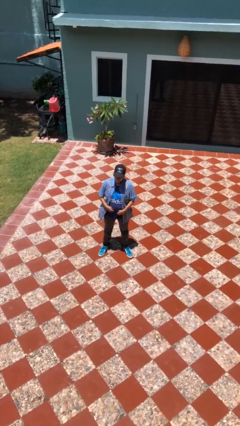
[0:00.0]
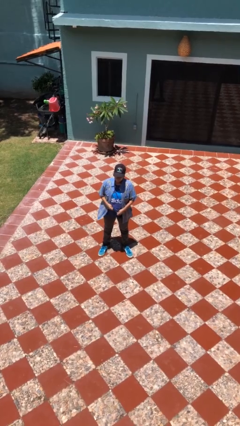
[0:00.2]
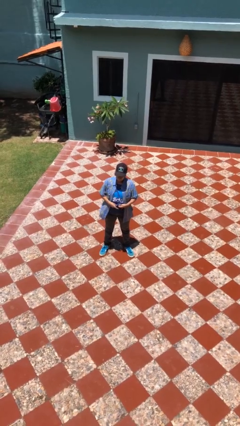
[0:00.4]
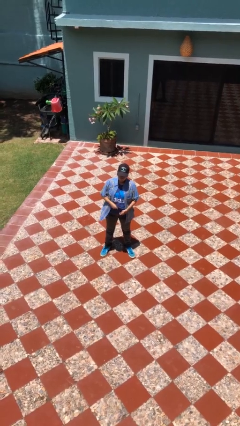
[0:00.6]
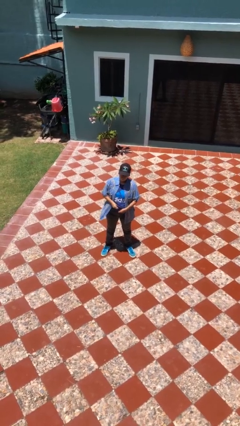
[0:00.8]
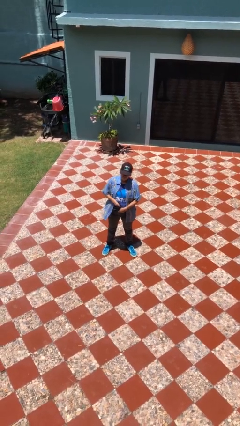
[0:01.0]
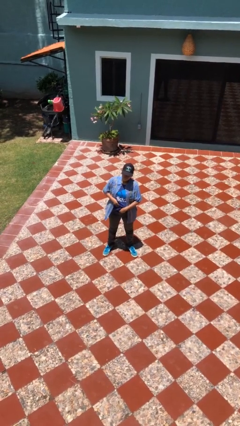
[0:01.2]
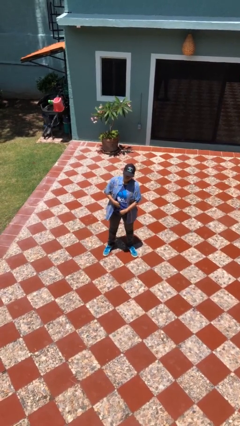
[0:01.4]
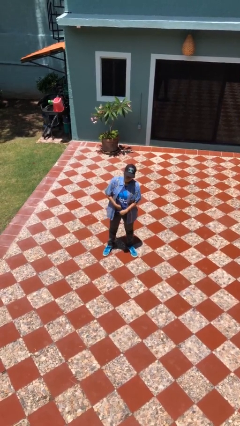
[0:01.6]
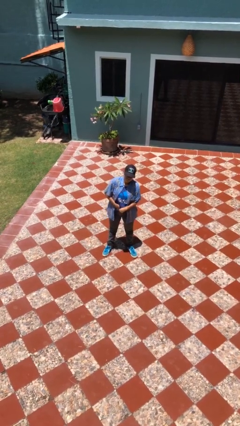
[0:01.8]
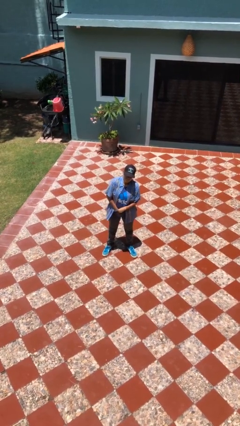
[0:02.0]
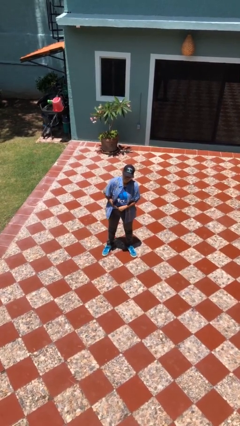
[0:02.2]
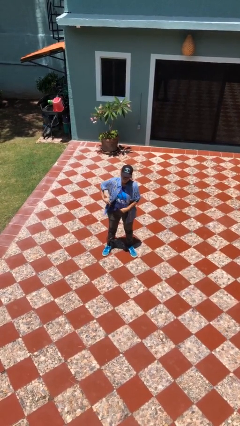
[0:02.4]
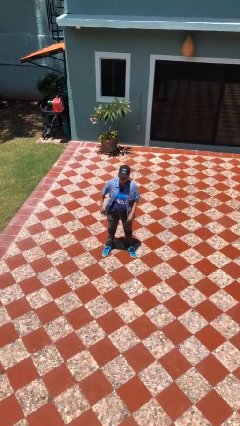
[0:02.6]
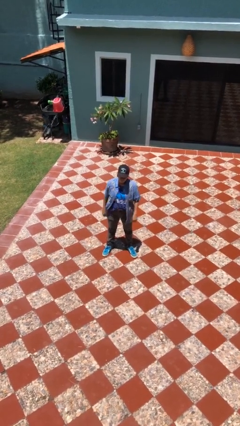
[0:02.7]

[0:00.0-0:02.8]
person tucks in shirt

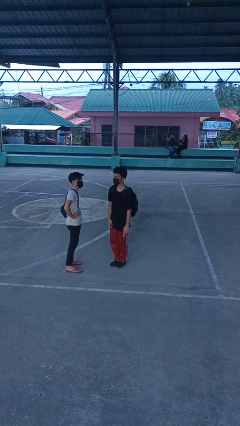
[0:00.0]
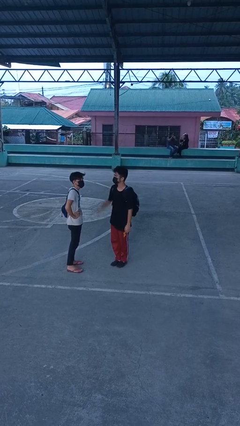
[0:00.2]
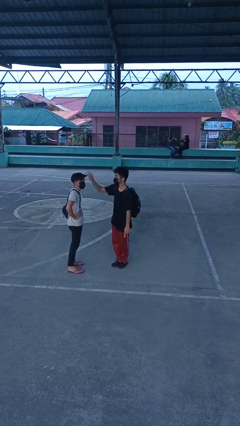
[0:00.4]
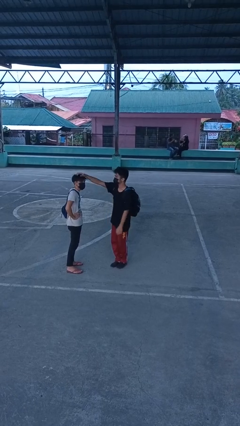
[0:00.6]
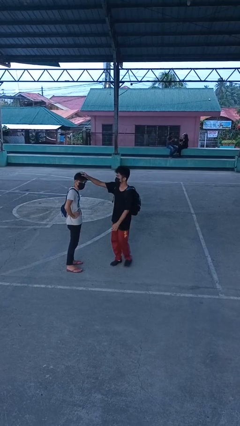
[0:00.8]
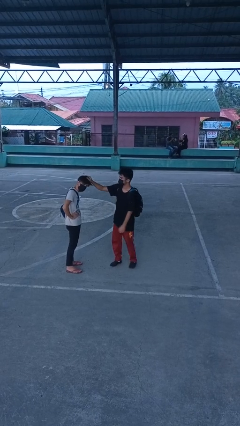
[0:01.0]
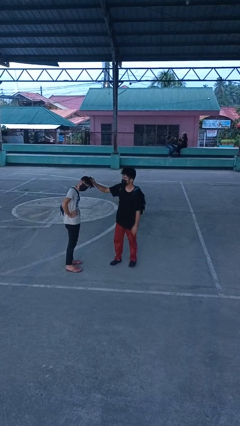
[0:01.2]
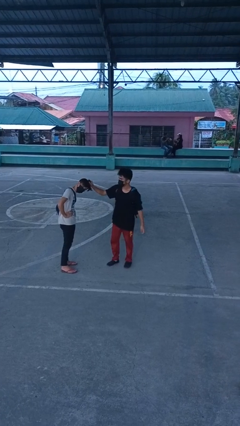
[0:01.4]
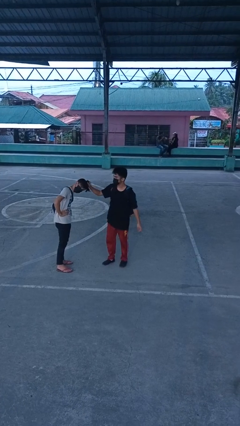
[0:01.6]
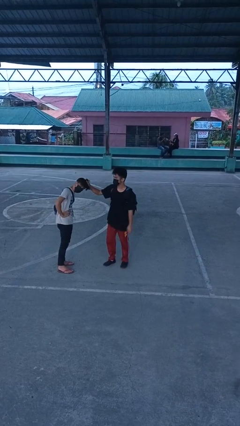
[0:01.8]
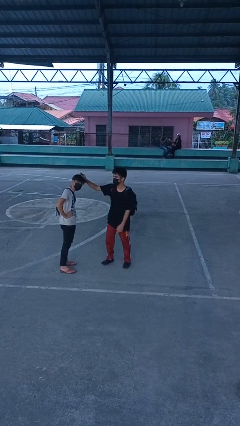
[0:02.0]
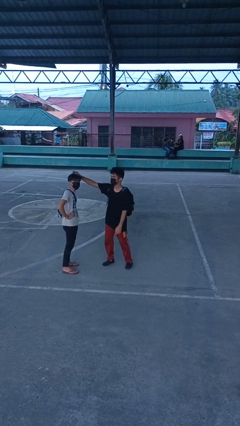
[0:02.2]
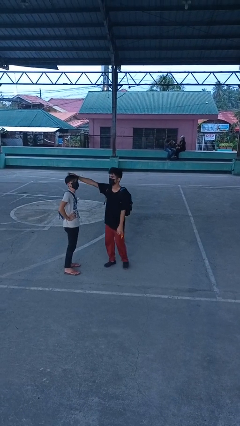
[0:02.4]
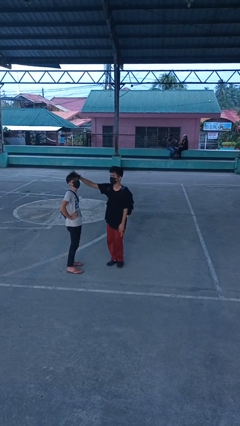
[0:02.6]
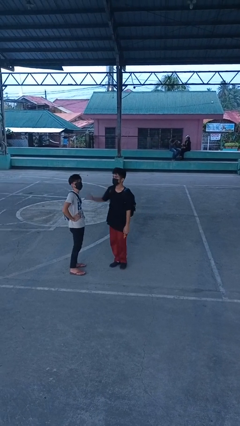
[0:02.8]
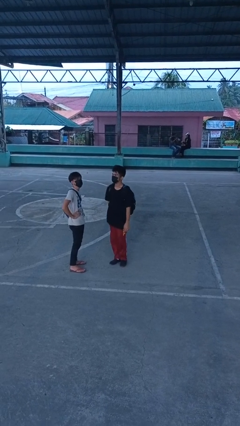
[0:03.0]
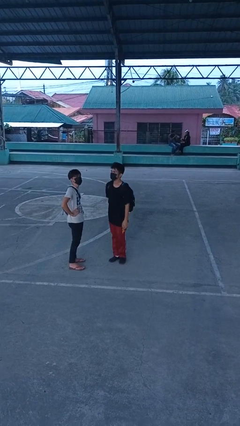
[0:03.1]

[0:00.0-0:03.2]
person grabs person by hair

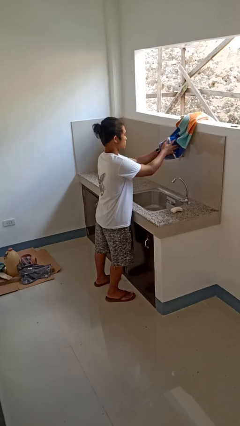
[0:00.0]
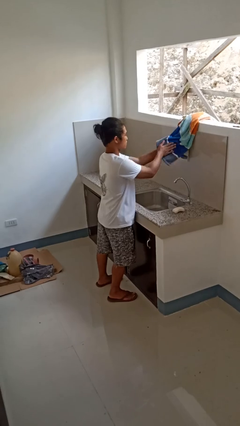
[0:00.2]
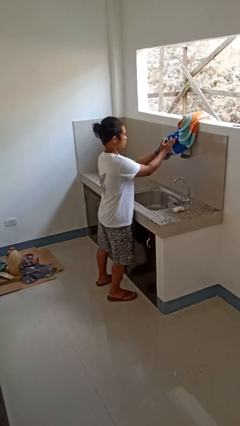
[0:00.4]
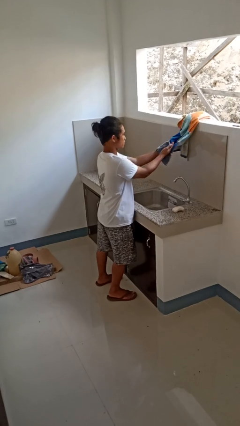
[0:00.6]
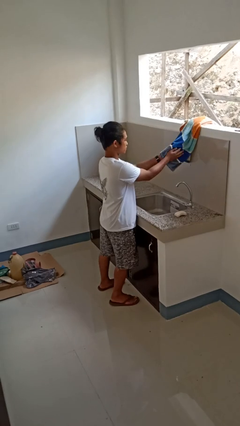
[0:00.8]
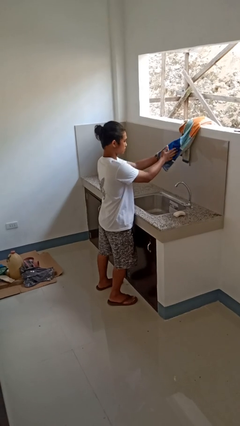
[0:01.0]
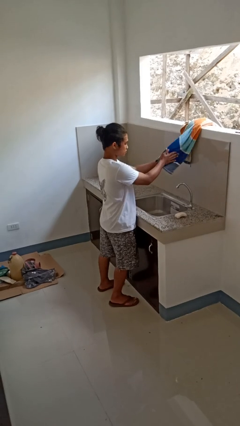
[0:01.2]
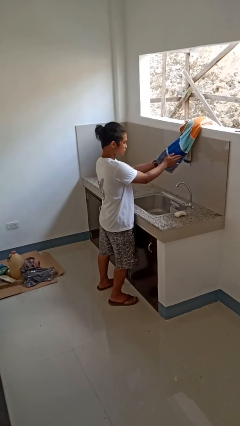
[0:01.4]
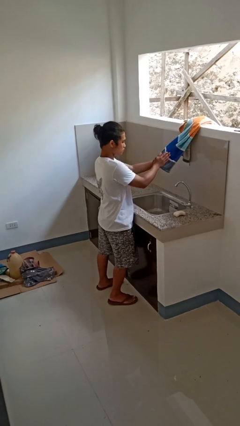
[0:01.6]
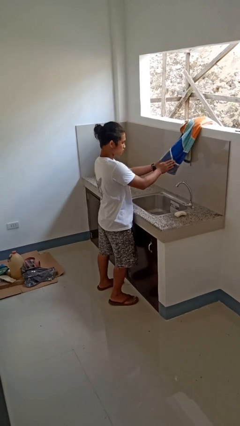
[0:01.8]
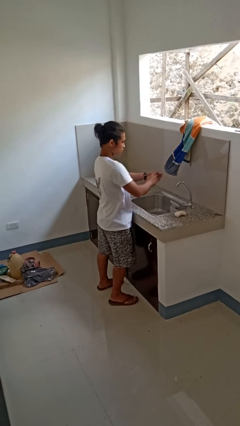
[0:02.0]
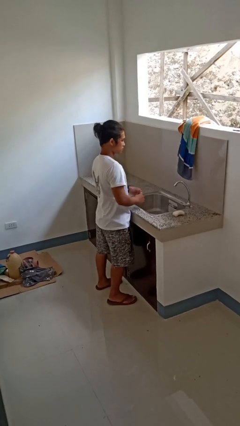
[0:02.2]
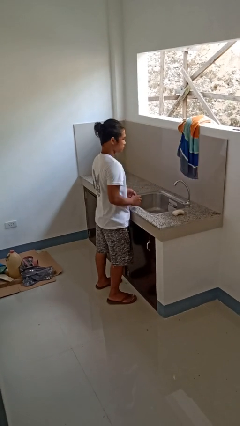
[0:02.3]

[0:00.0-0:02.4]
person dries hands with towel

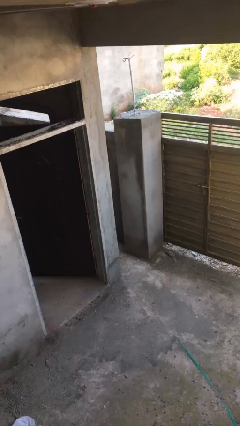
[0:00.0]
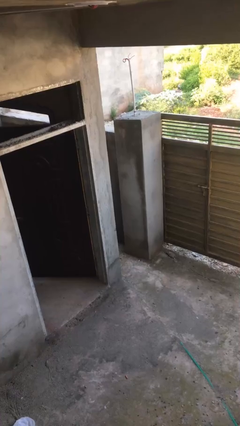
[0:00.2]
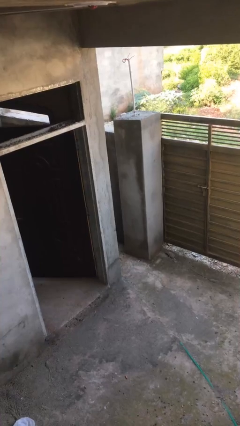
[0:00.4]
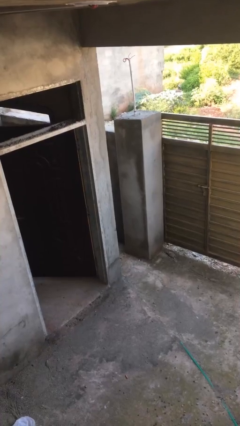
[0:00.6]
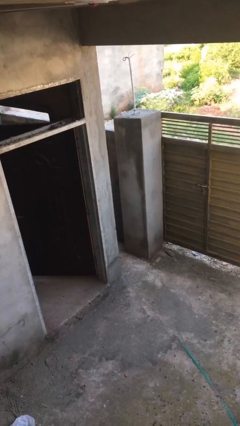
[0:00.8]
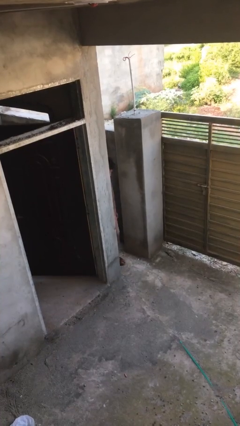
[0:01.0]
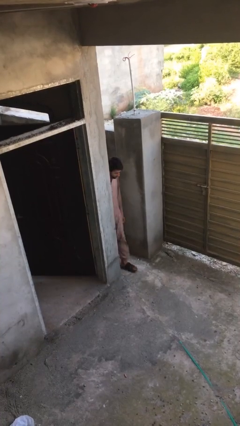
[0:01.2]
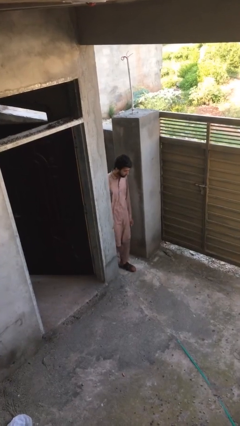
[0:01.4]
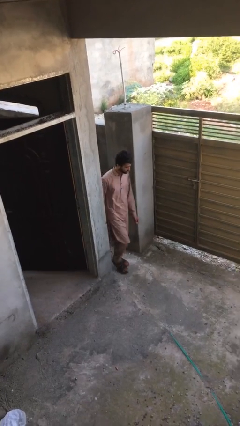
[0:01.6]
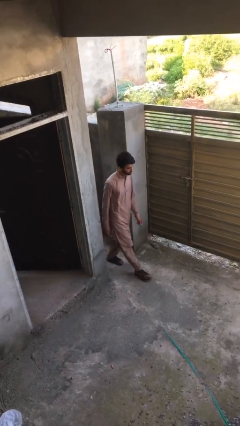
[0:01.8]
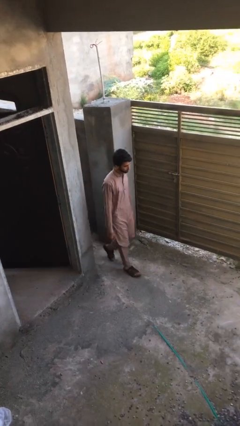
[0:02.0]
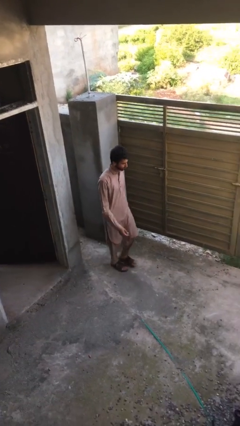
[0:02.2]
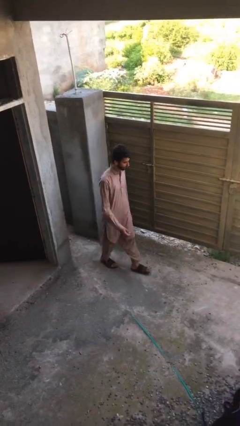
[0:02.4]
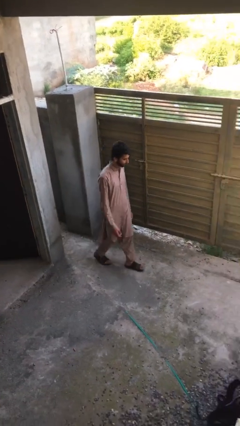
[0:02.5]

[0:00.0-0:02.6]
person enters scene through structure

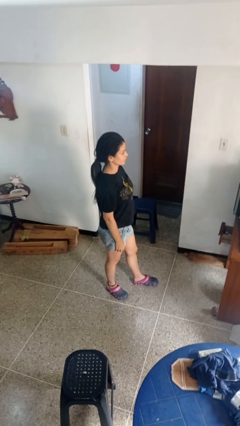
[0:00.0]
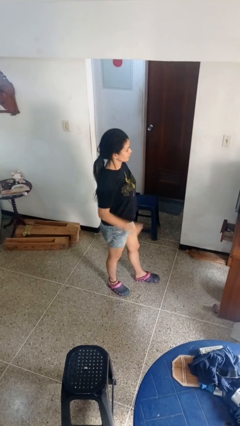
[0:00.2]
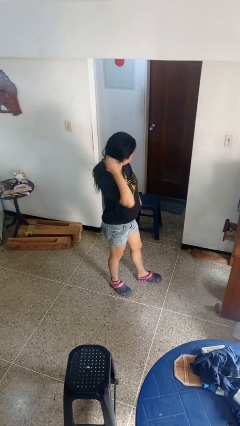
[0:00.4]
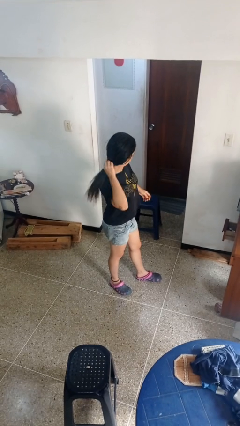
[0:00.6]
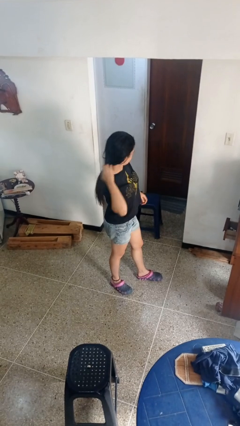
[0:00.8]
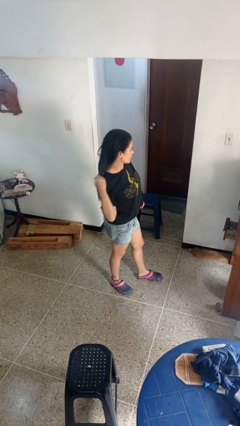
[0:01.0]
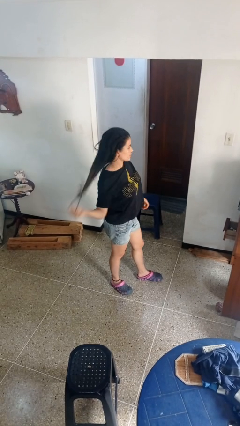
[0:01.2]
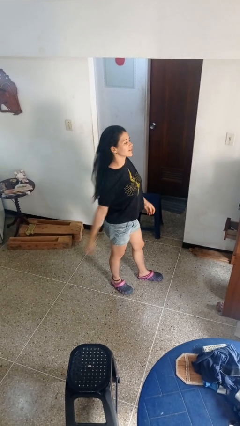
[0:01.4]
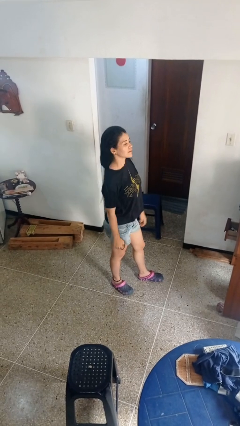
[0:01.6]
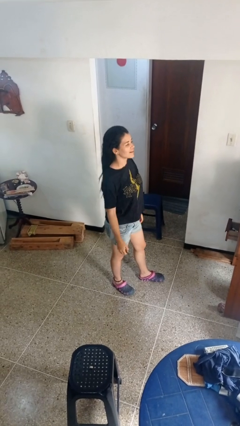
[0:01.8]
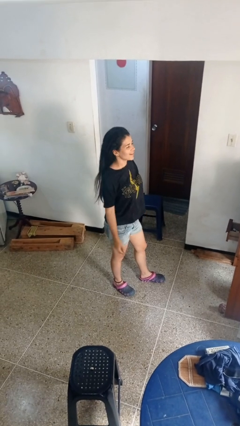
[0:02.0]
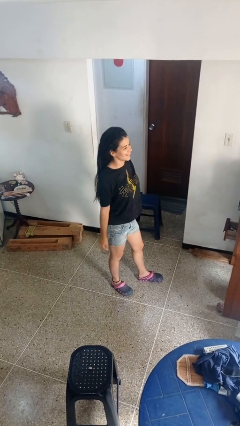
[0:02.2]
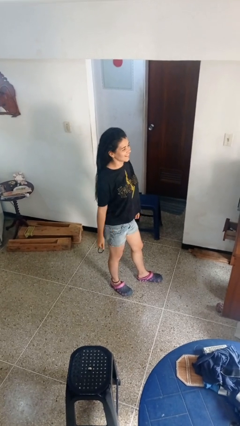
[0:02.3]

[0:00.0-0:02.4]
person takes off hairtie

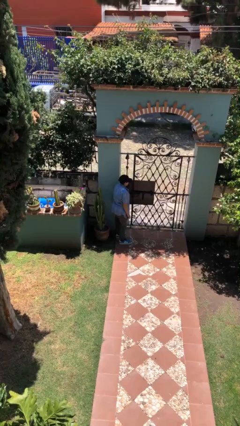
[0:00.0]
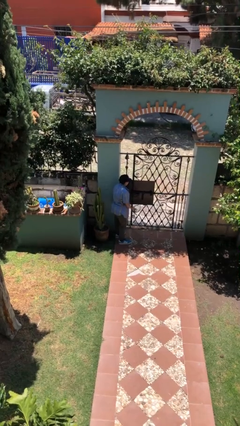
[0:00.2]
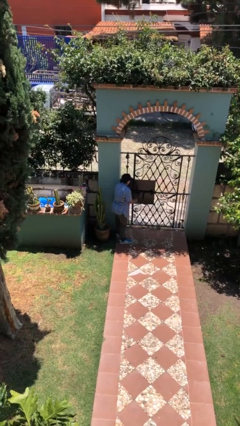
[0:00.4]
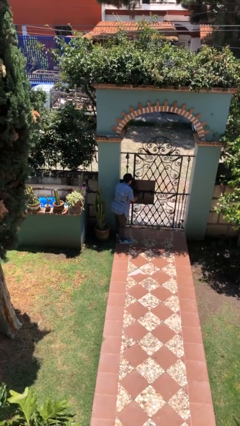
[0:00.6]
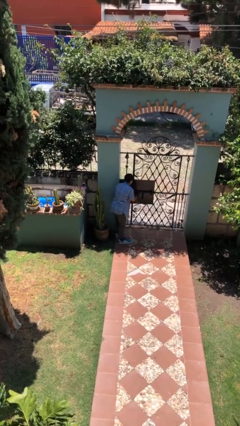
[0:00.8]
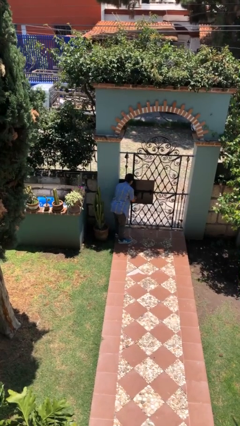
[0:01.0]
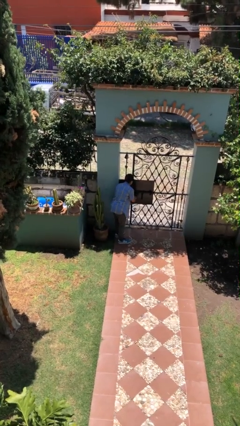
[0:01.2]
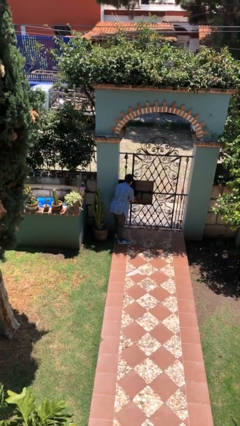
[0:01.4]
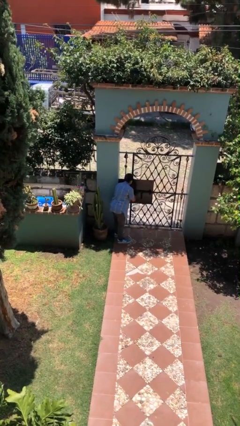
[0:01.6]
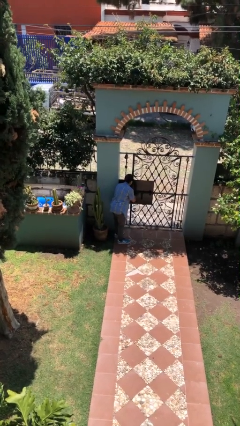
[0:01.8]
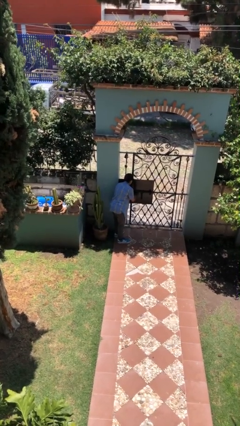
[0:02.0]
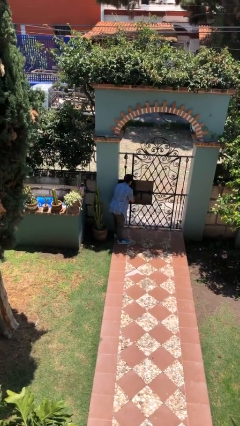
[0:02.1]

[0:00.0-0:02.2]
person unlocks door with keys

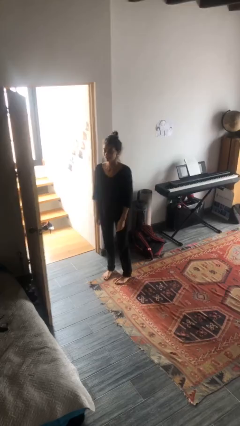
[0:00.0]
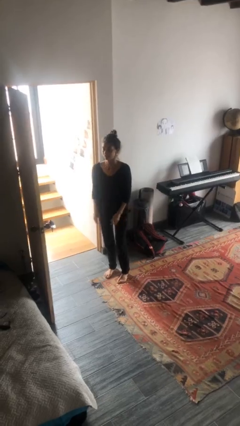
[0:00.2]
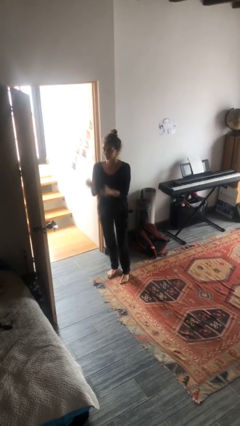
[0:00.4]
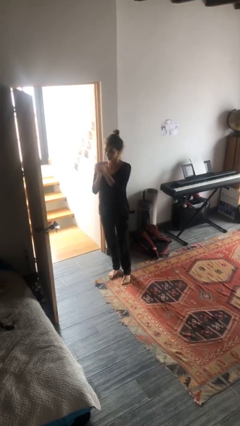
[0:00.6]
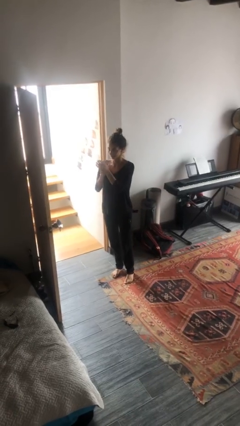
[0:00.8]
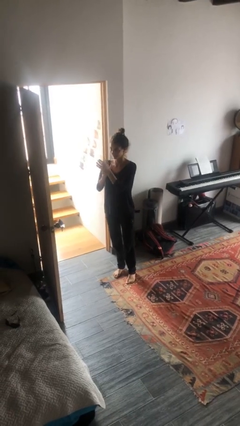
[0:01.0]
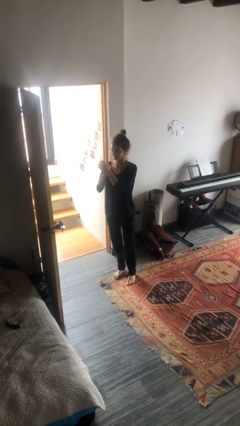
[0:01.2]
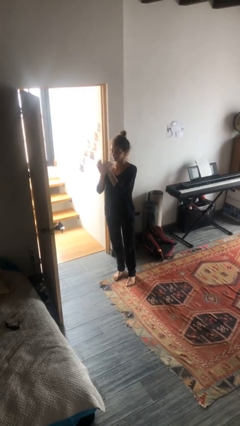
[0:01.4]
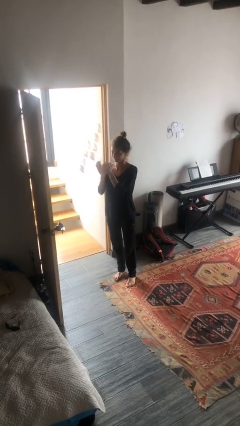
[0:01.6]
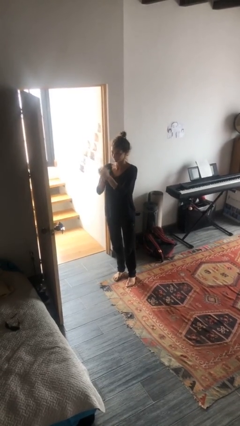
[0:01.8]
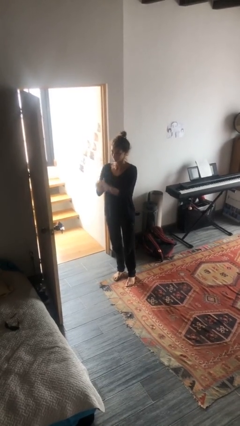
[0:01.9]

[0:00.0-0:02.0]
person claps hands
